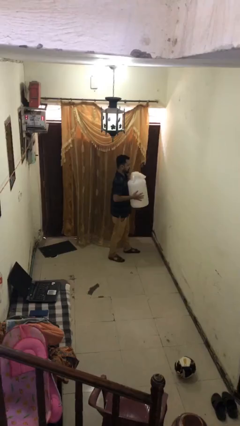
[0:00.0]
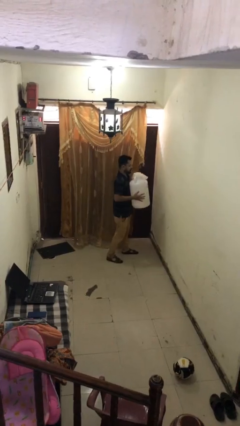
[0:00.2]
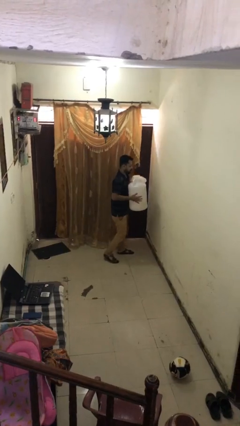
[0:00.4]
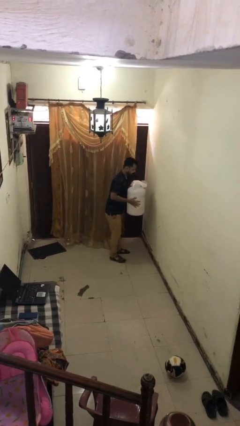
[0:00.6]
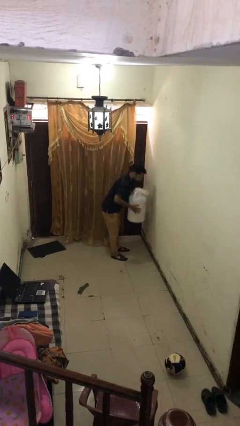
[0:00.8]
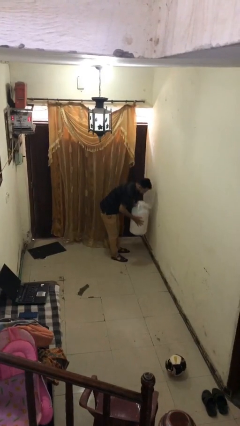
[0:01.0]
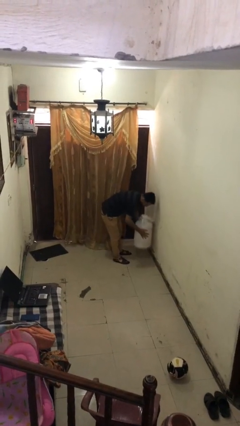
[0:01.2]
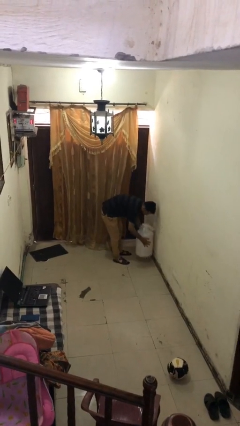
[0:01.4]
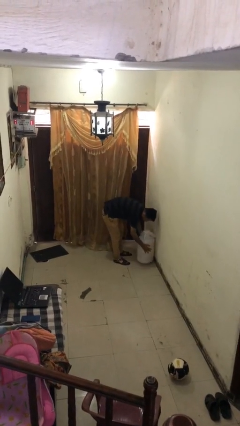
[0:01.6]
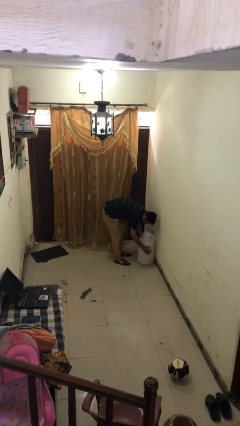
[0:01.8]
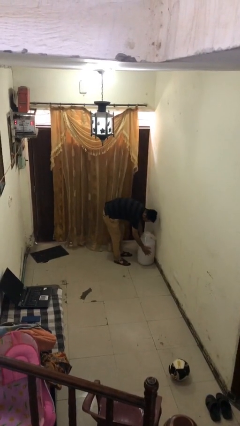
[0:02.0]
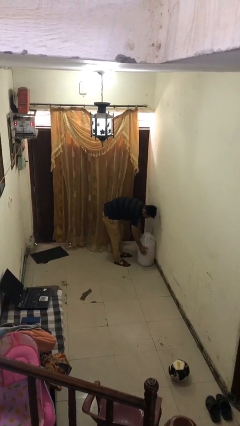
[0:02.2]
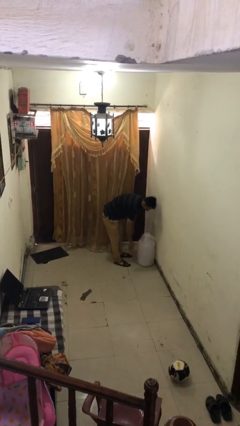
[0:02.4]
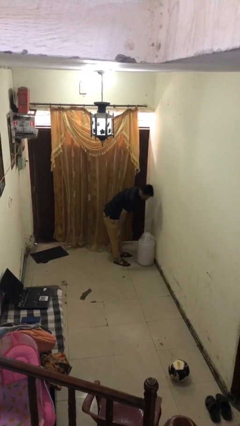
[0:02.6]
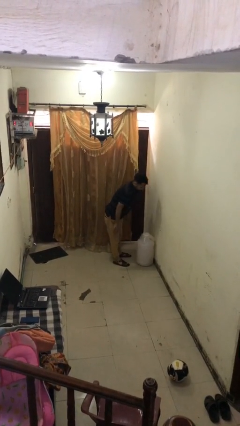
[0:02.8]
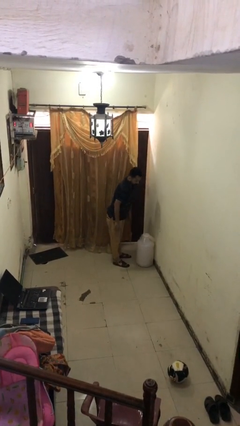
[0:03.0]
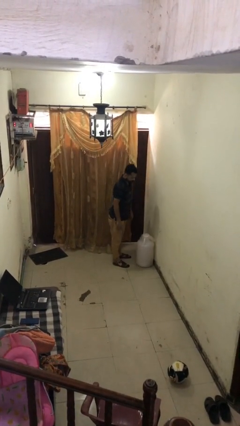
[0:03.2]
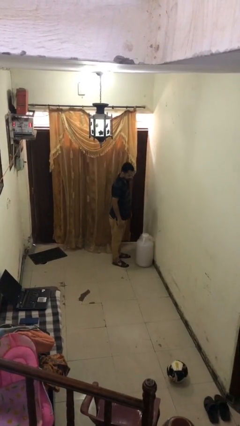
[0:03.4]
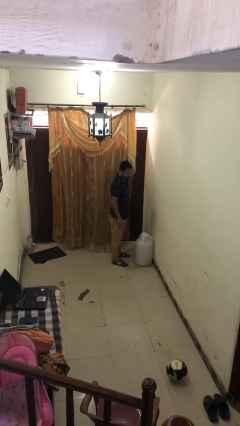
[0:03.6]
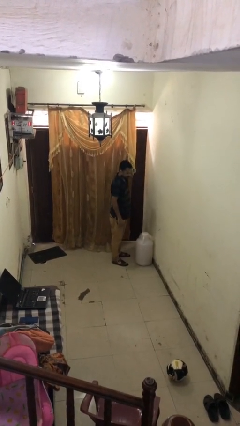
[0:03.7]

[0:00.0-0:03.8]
person puts down object on floor

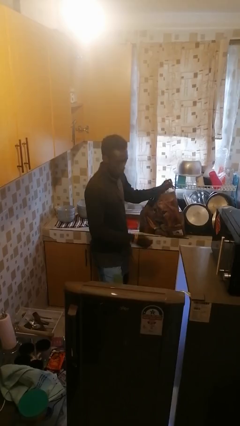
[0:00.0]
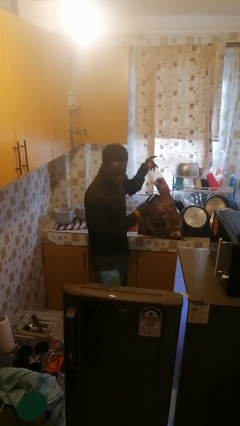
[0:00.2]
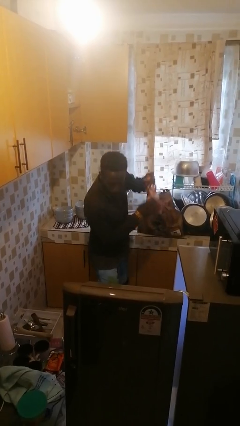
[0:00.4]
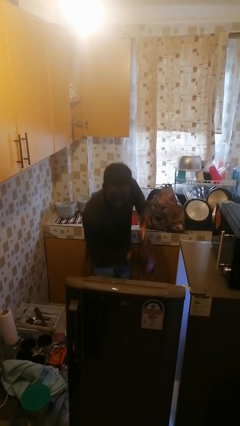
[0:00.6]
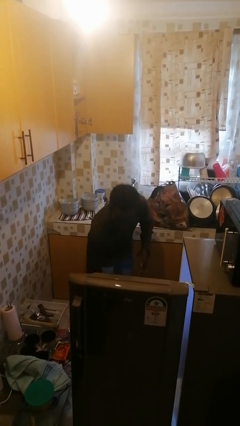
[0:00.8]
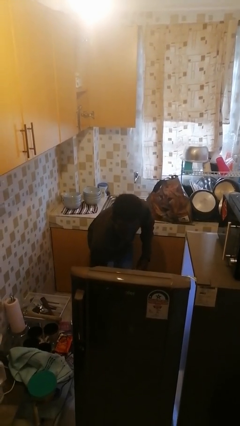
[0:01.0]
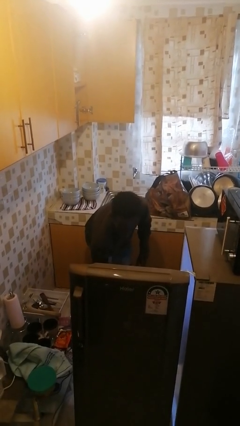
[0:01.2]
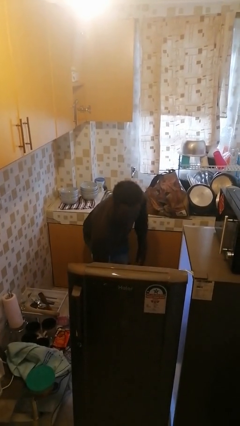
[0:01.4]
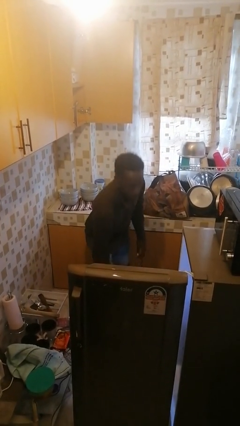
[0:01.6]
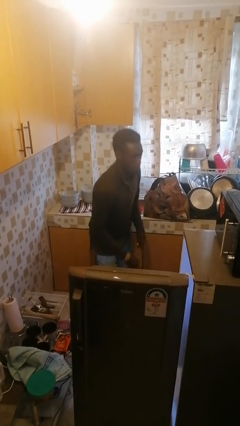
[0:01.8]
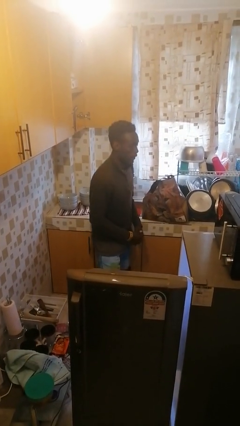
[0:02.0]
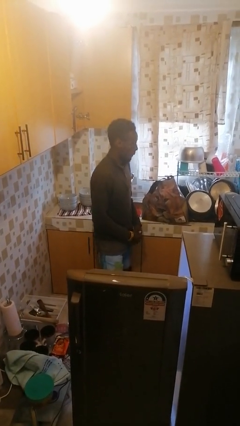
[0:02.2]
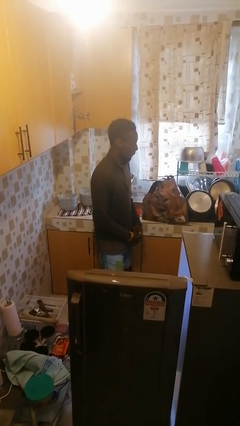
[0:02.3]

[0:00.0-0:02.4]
person loads groceries into refrigerator

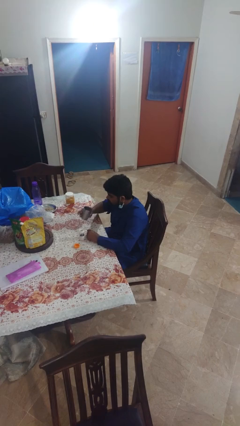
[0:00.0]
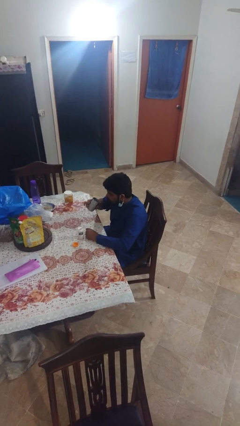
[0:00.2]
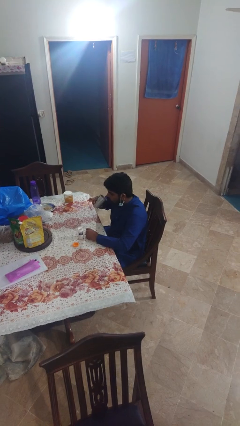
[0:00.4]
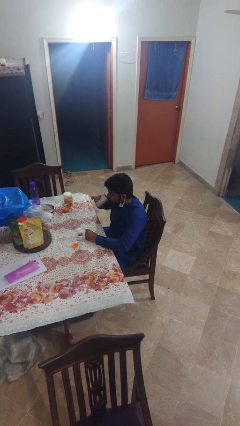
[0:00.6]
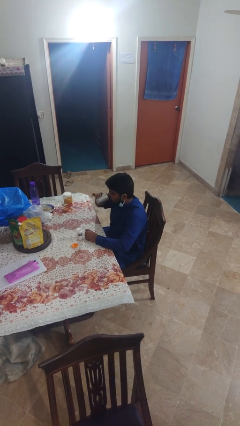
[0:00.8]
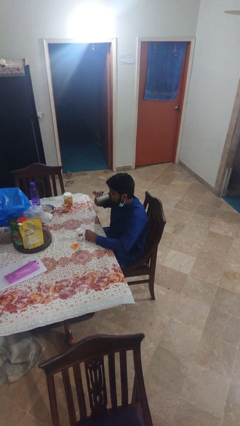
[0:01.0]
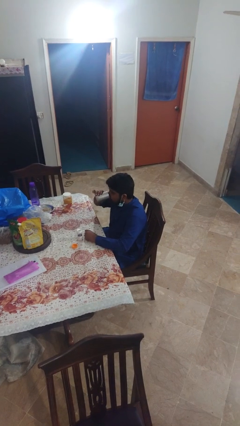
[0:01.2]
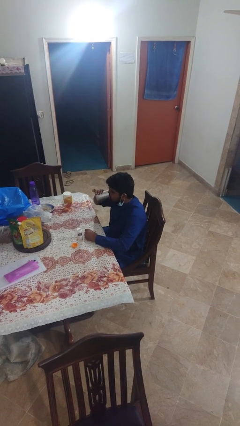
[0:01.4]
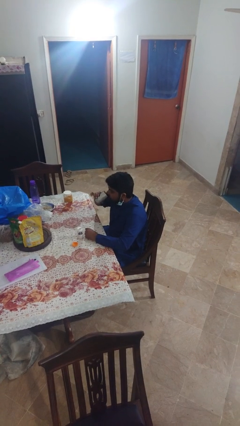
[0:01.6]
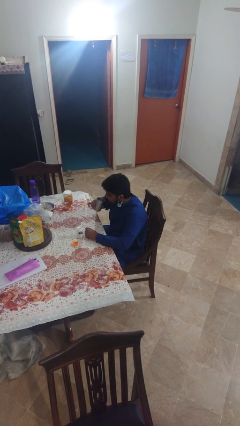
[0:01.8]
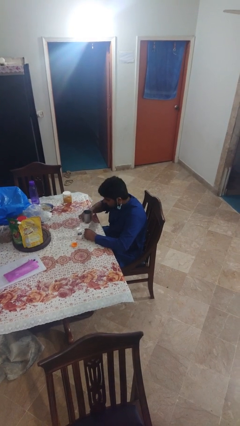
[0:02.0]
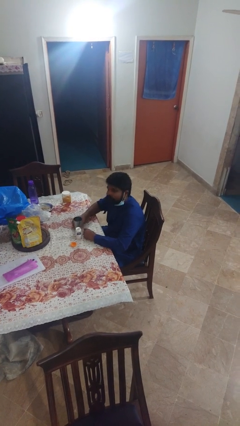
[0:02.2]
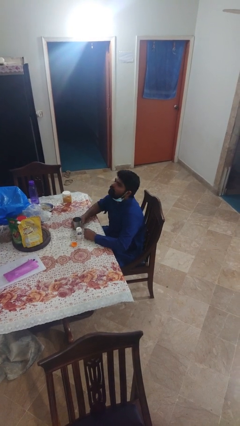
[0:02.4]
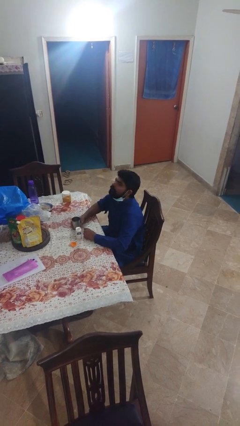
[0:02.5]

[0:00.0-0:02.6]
person drinks from cup

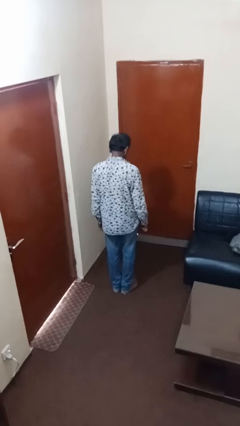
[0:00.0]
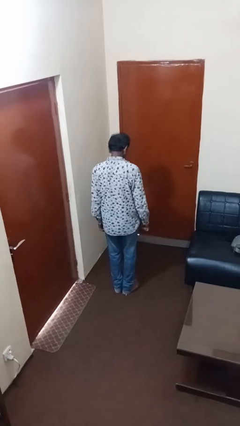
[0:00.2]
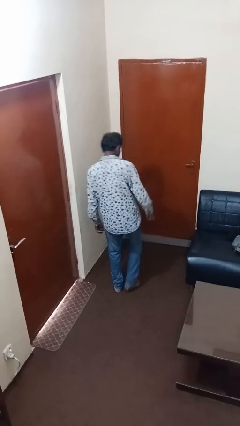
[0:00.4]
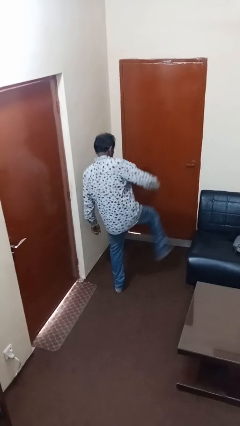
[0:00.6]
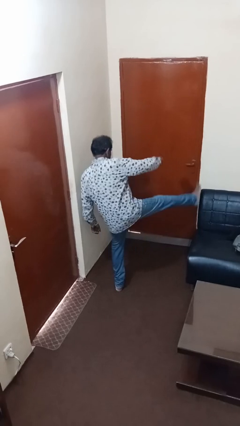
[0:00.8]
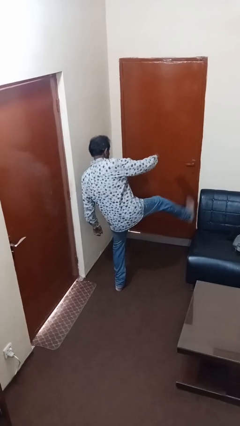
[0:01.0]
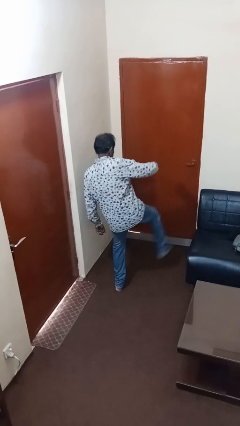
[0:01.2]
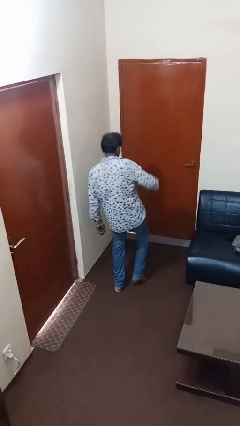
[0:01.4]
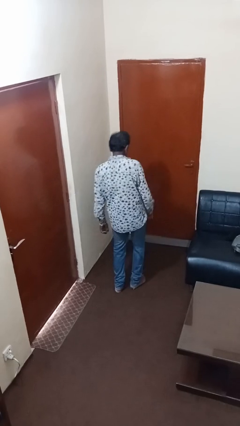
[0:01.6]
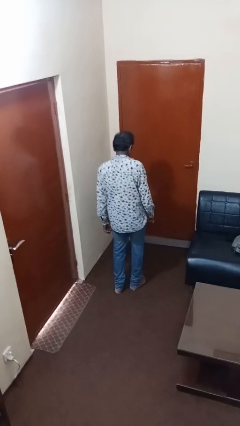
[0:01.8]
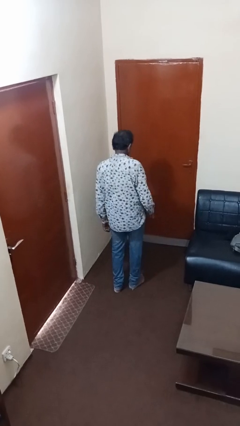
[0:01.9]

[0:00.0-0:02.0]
person karate kicks

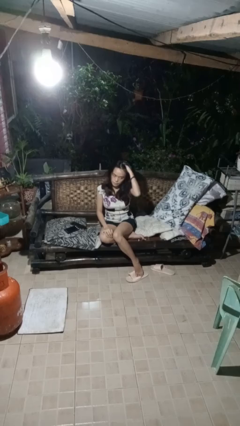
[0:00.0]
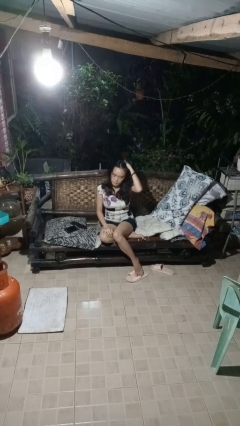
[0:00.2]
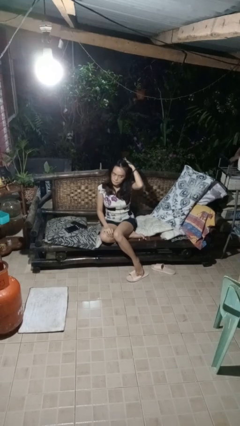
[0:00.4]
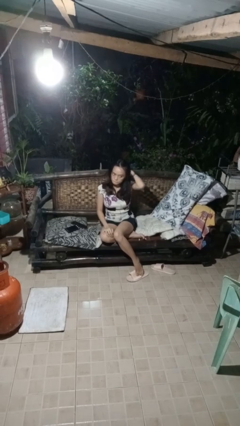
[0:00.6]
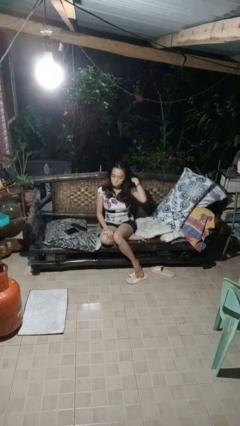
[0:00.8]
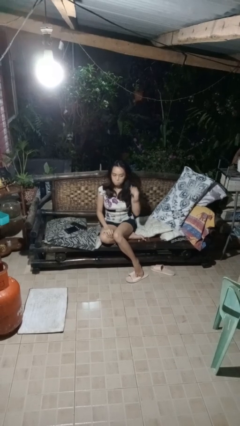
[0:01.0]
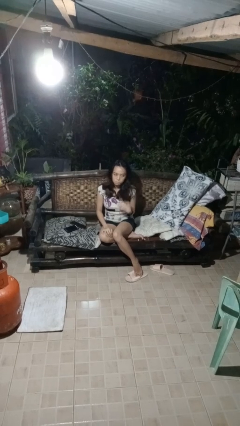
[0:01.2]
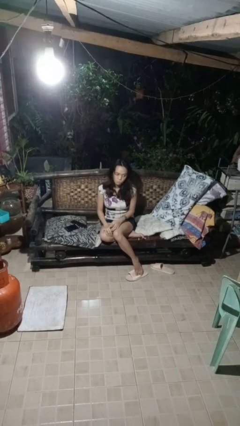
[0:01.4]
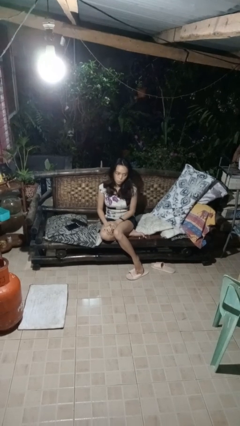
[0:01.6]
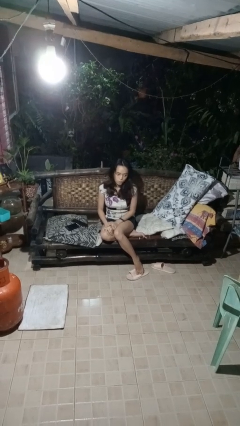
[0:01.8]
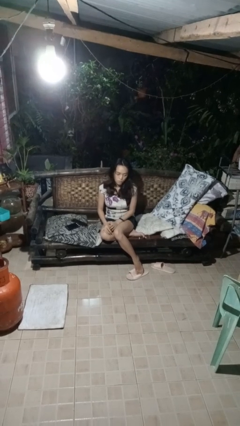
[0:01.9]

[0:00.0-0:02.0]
person searches in couch

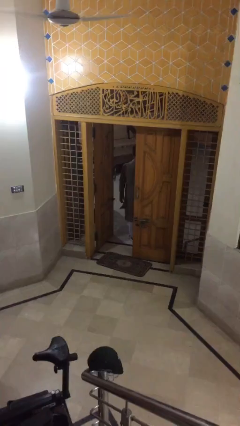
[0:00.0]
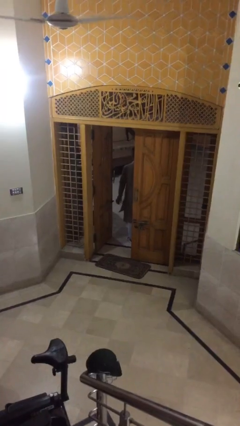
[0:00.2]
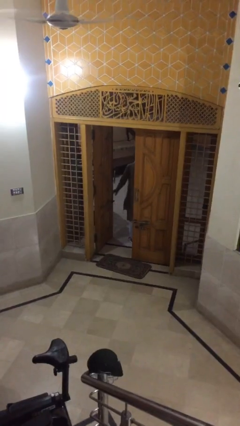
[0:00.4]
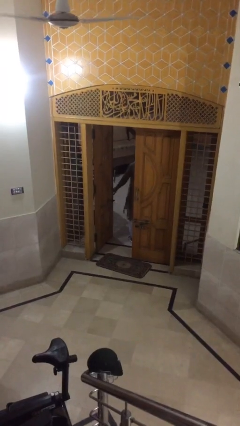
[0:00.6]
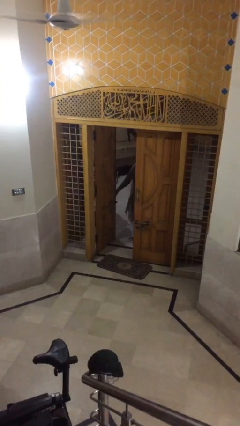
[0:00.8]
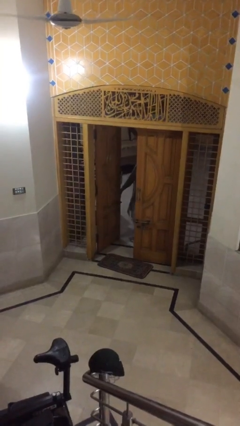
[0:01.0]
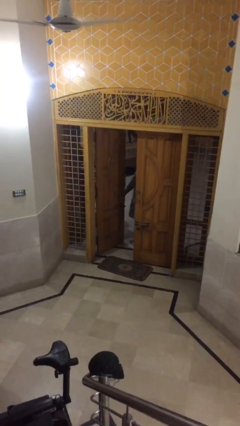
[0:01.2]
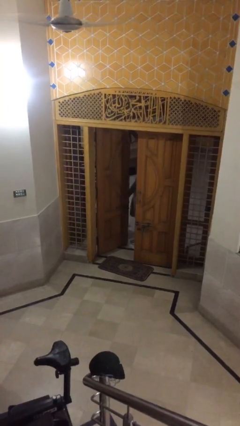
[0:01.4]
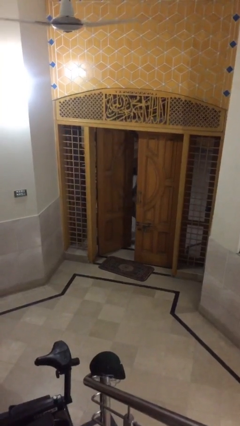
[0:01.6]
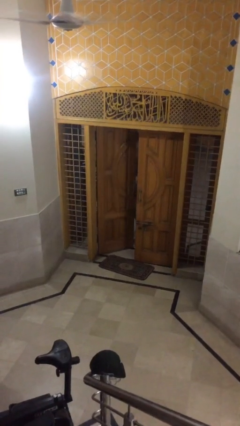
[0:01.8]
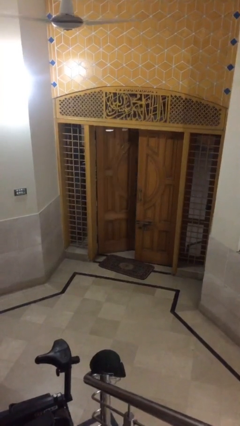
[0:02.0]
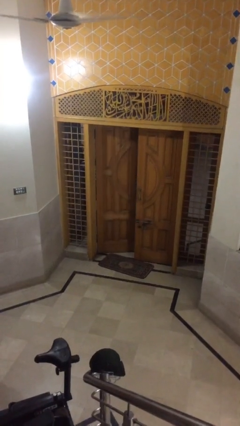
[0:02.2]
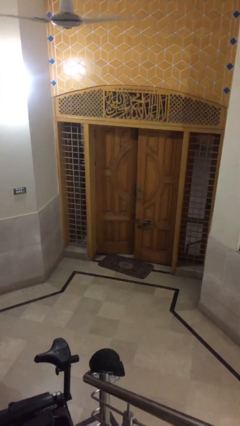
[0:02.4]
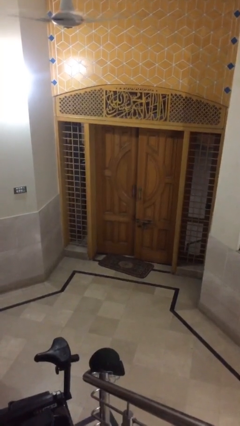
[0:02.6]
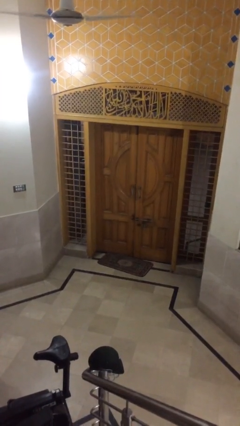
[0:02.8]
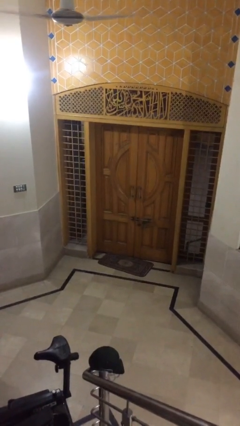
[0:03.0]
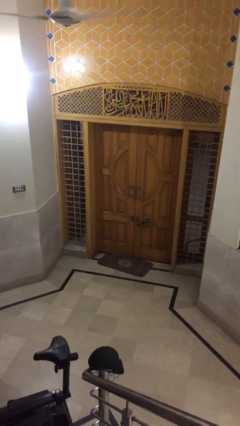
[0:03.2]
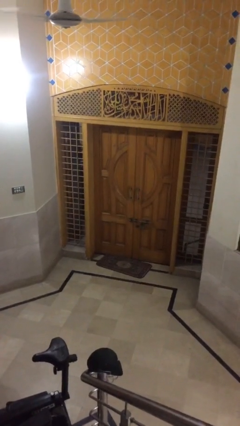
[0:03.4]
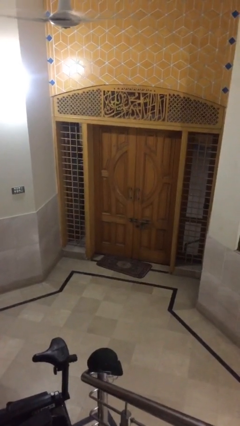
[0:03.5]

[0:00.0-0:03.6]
person closes facility door

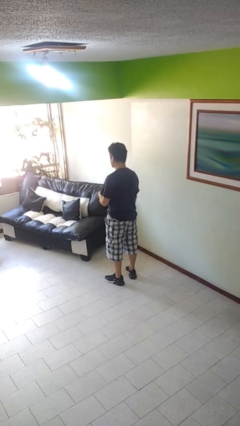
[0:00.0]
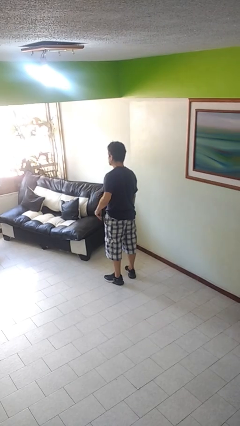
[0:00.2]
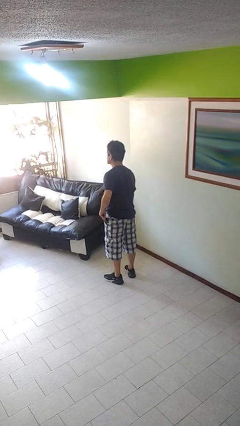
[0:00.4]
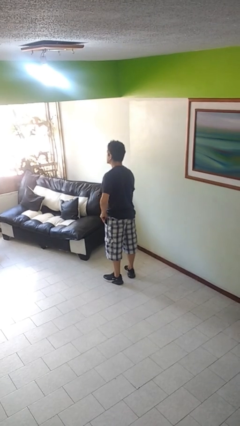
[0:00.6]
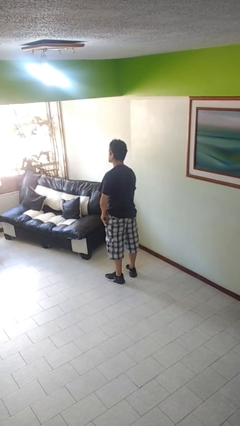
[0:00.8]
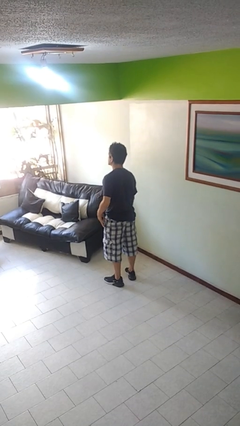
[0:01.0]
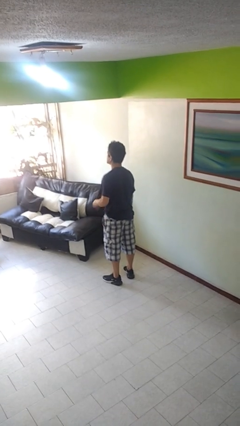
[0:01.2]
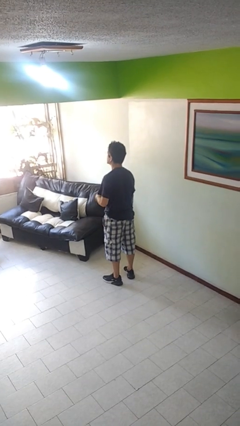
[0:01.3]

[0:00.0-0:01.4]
person puts phone into pocket
